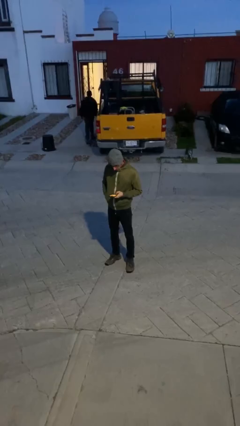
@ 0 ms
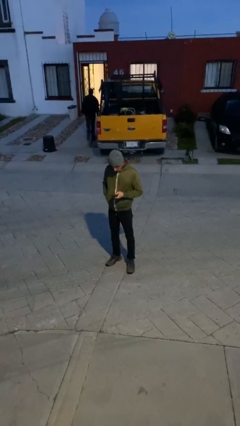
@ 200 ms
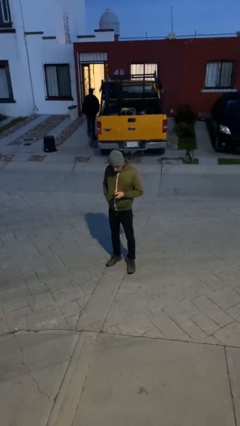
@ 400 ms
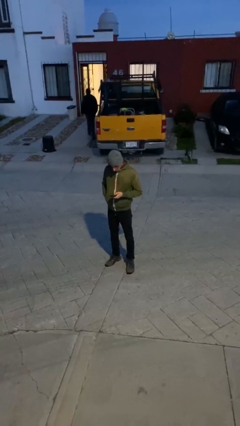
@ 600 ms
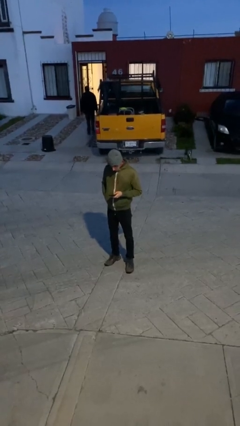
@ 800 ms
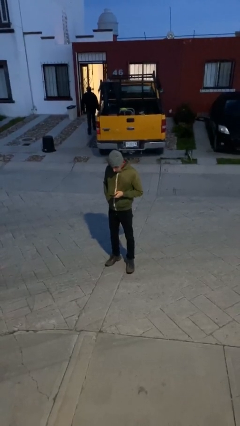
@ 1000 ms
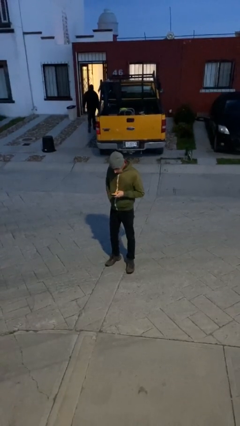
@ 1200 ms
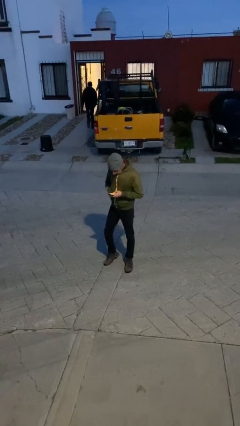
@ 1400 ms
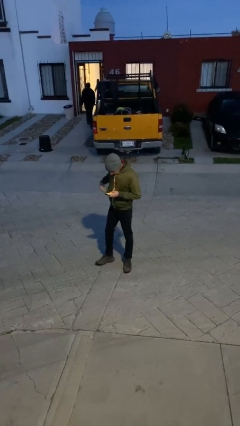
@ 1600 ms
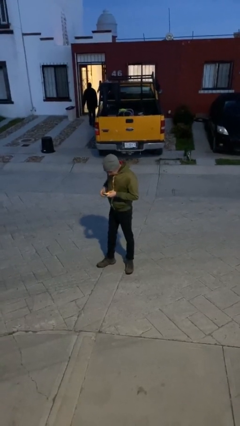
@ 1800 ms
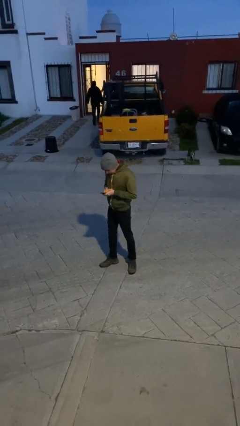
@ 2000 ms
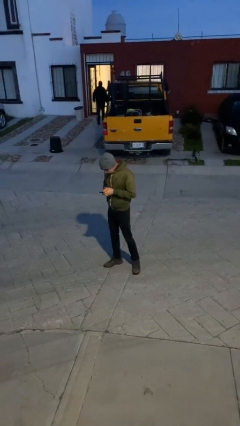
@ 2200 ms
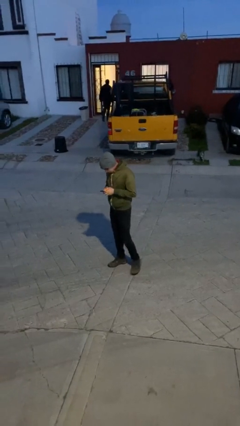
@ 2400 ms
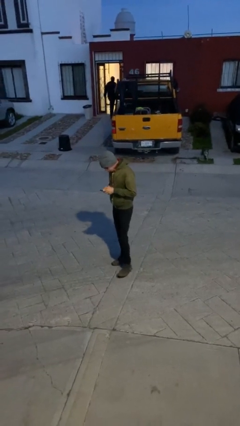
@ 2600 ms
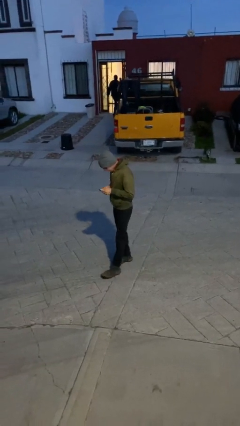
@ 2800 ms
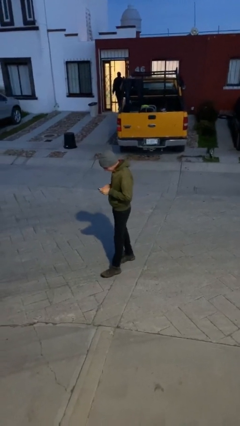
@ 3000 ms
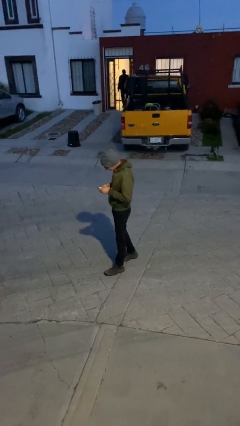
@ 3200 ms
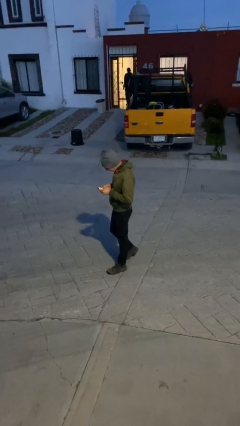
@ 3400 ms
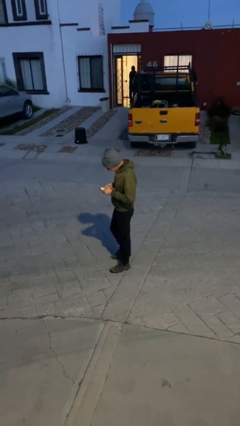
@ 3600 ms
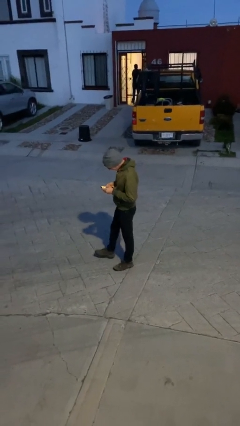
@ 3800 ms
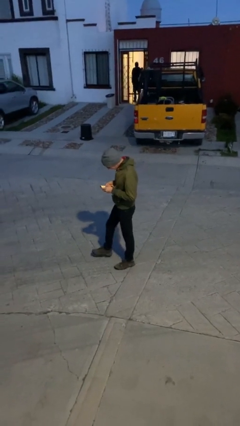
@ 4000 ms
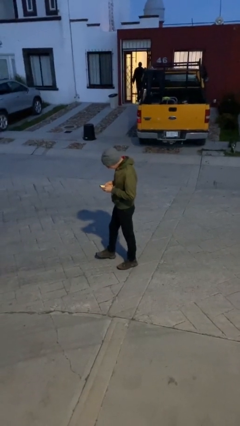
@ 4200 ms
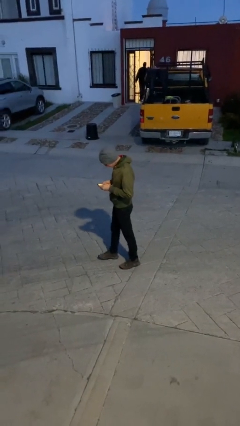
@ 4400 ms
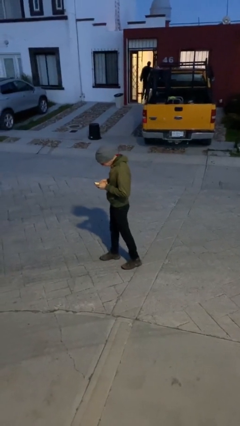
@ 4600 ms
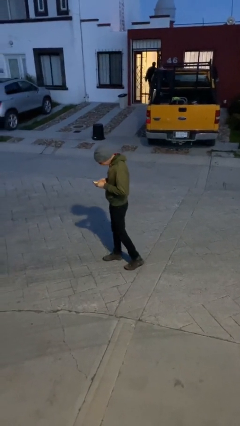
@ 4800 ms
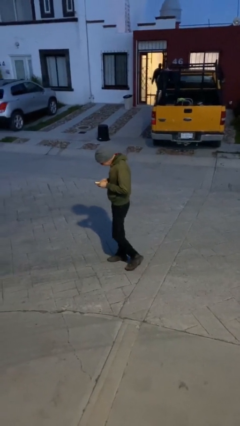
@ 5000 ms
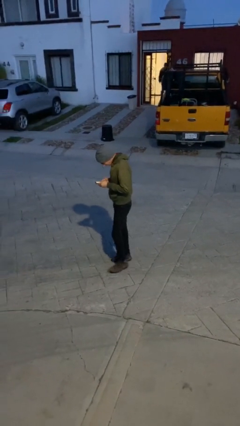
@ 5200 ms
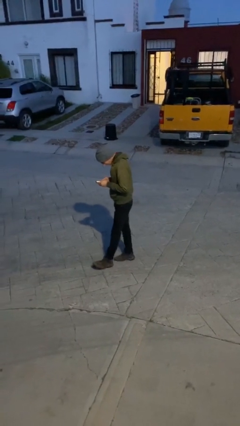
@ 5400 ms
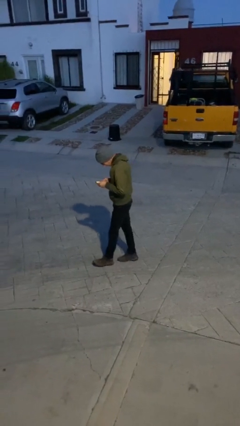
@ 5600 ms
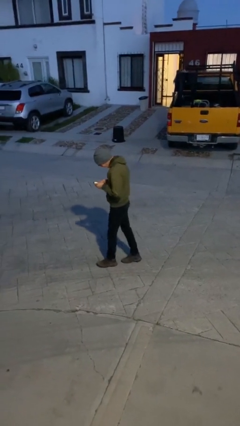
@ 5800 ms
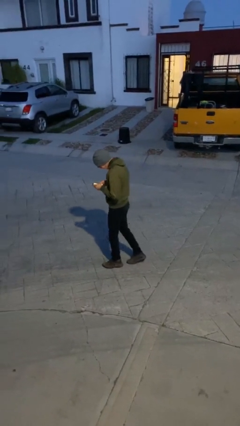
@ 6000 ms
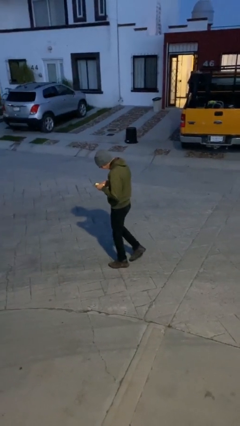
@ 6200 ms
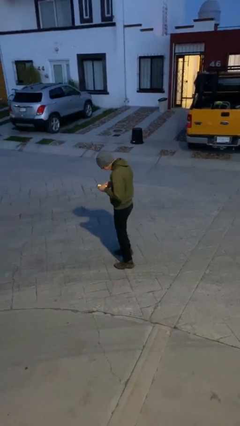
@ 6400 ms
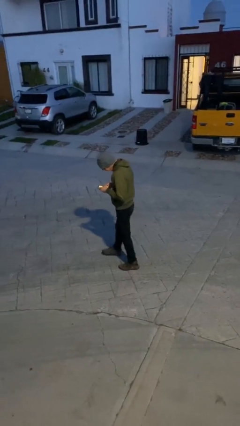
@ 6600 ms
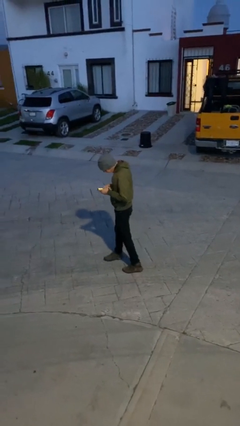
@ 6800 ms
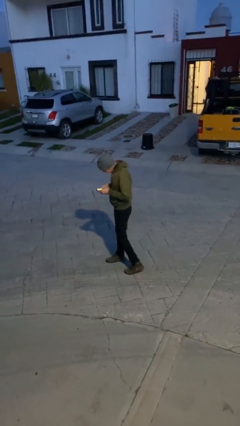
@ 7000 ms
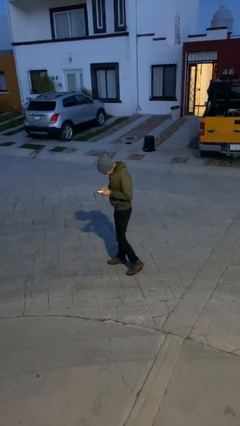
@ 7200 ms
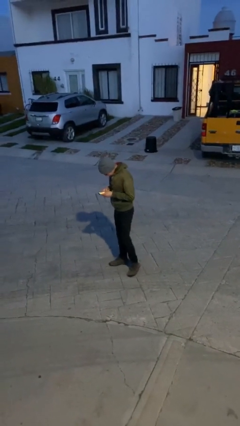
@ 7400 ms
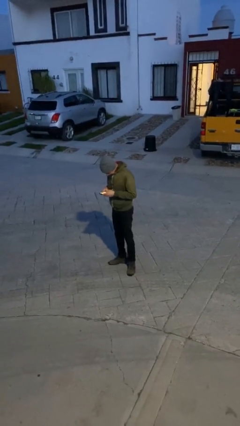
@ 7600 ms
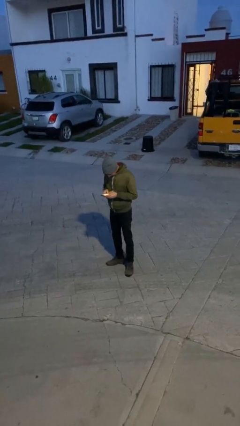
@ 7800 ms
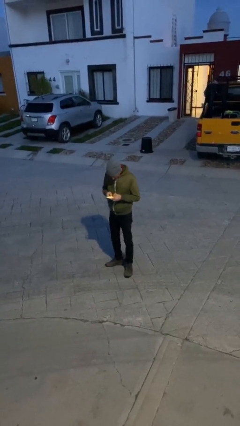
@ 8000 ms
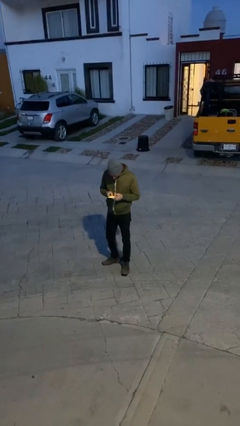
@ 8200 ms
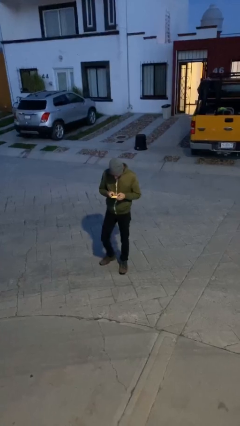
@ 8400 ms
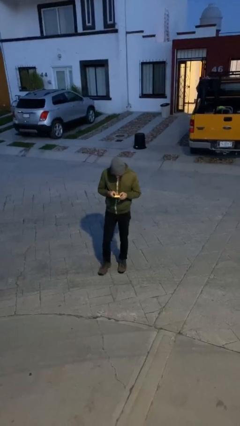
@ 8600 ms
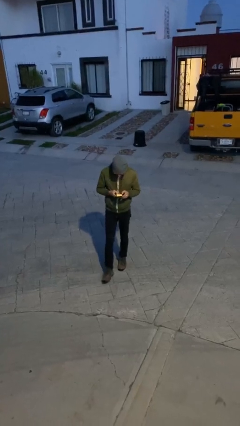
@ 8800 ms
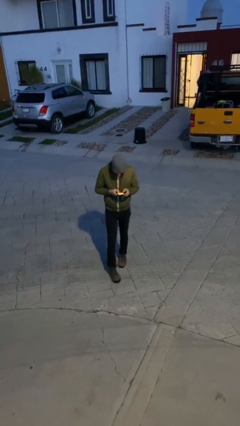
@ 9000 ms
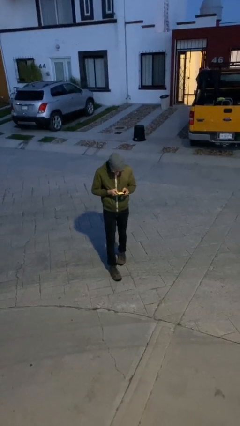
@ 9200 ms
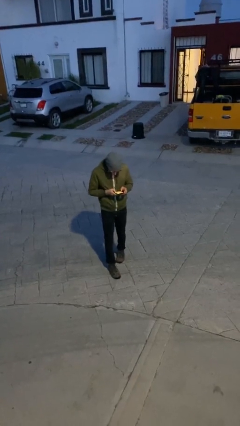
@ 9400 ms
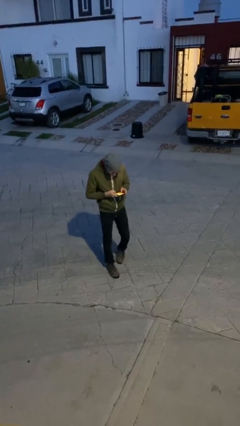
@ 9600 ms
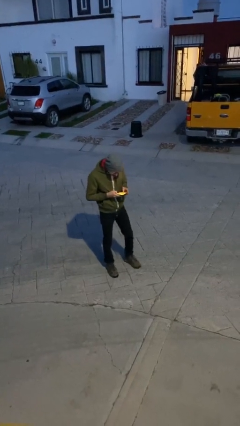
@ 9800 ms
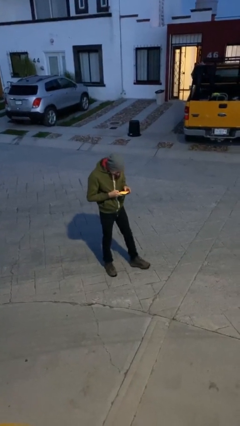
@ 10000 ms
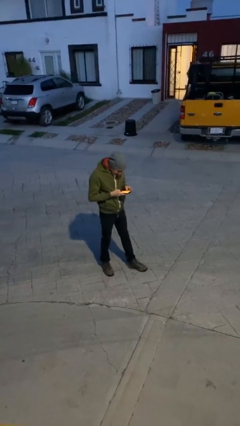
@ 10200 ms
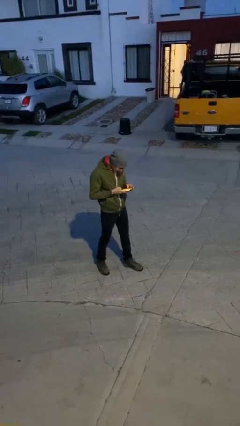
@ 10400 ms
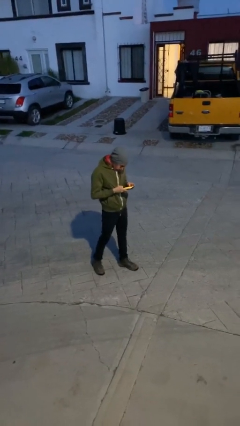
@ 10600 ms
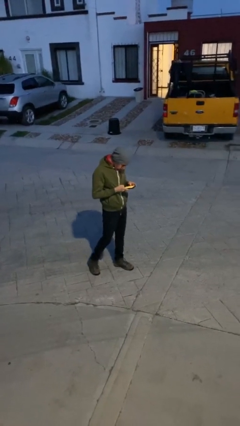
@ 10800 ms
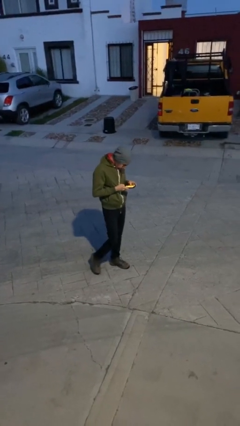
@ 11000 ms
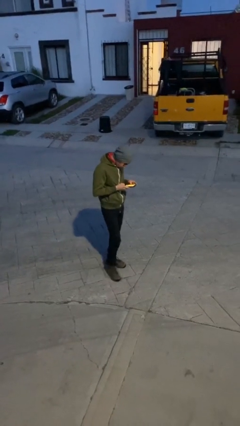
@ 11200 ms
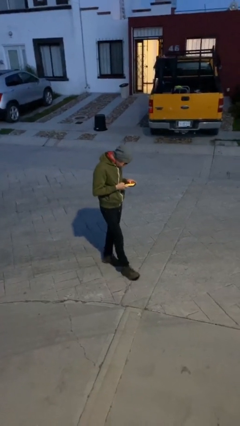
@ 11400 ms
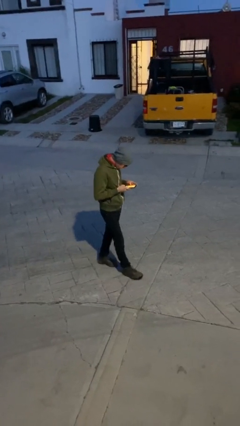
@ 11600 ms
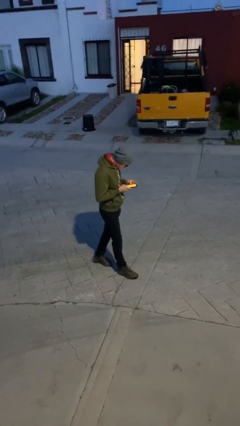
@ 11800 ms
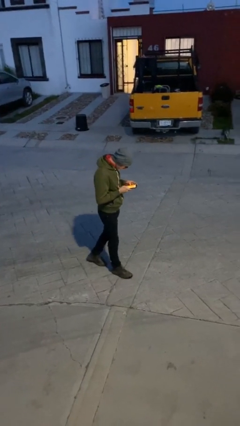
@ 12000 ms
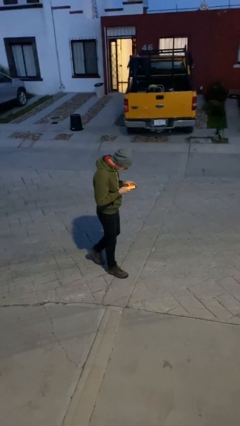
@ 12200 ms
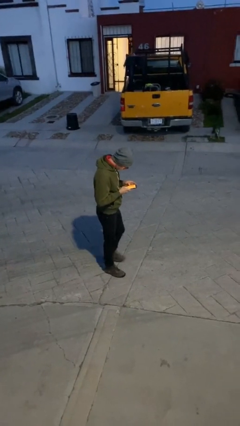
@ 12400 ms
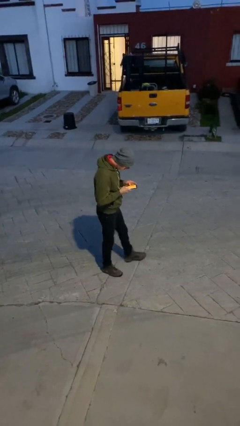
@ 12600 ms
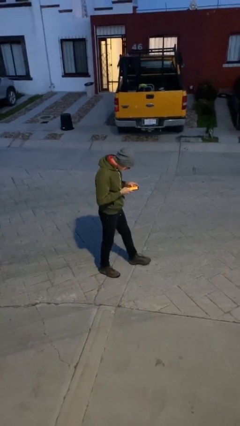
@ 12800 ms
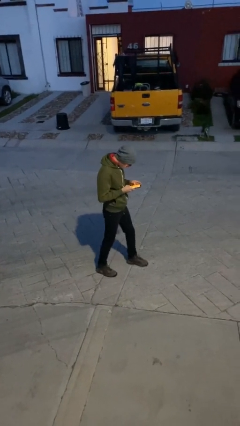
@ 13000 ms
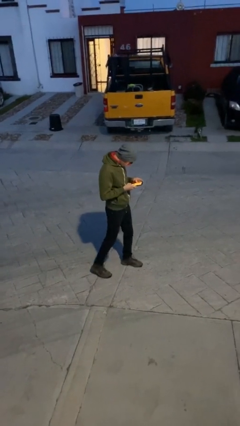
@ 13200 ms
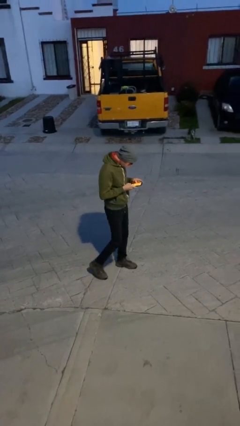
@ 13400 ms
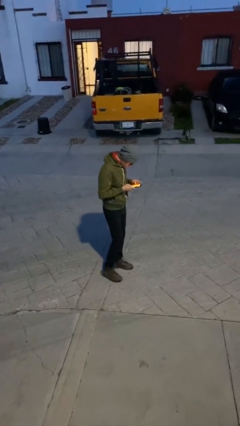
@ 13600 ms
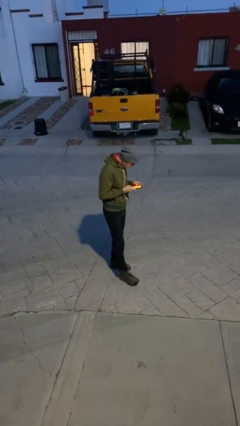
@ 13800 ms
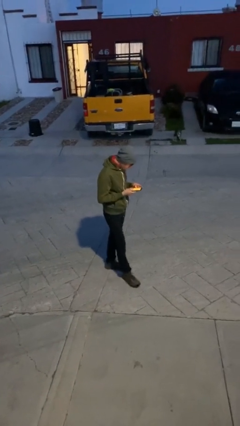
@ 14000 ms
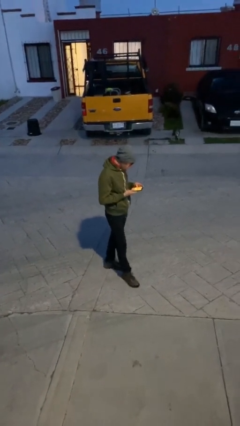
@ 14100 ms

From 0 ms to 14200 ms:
person texts on phone

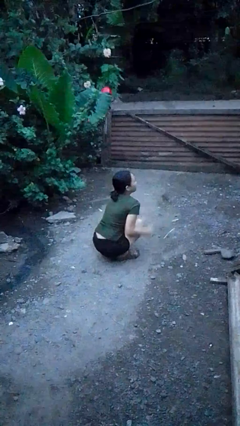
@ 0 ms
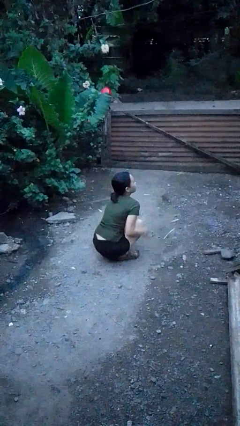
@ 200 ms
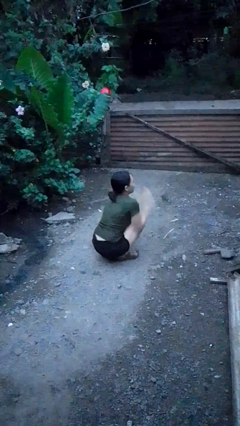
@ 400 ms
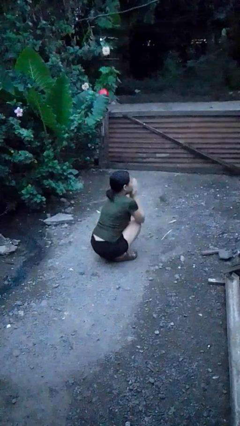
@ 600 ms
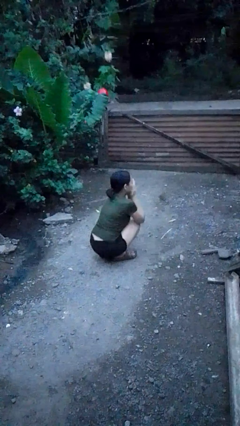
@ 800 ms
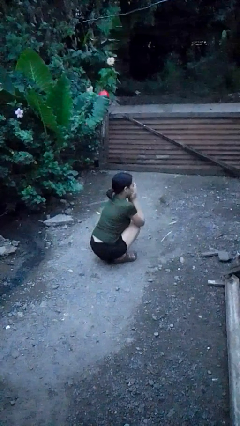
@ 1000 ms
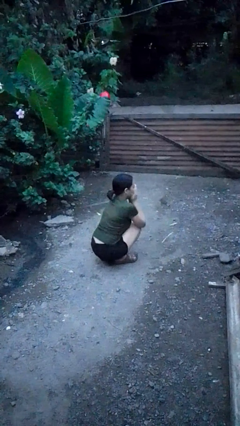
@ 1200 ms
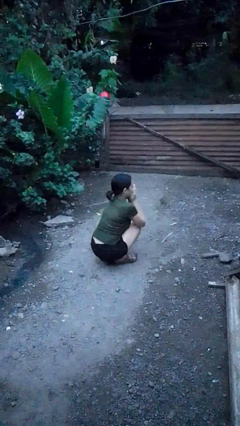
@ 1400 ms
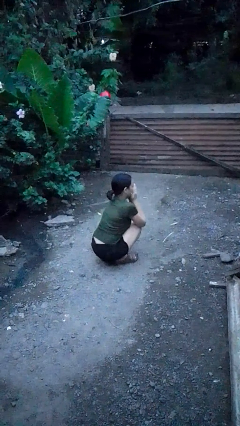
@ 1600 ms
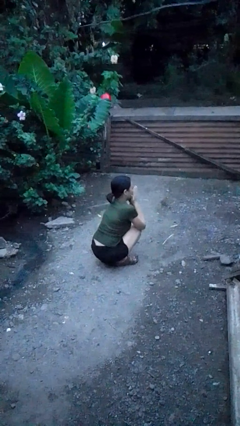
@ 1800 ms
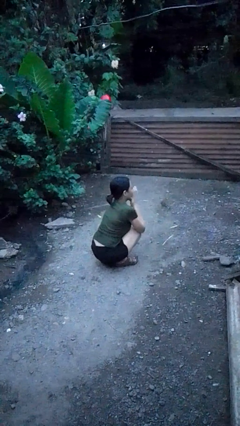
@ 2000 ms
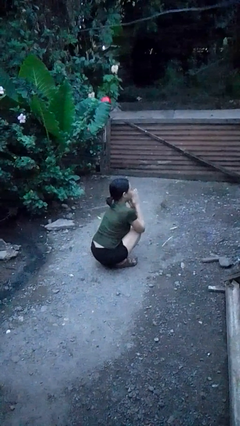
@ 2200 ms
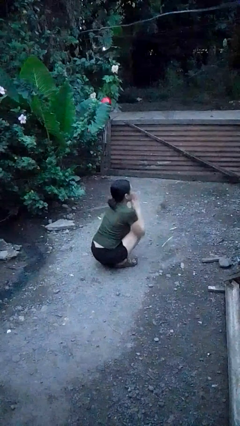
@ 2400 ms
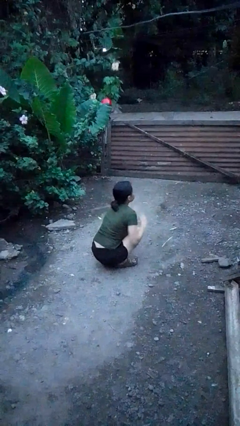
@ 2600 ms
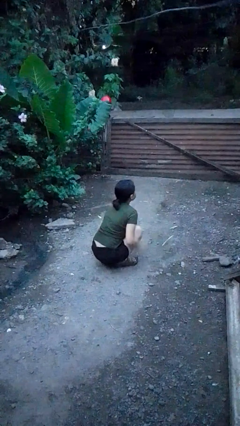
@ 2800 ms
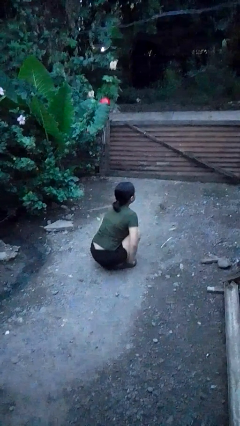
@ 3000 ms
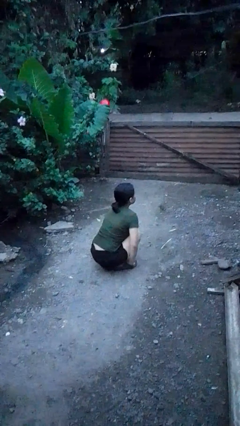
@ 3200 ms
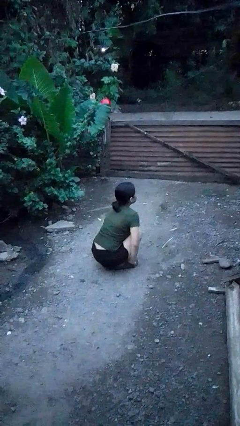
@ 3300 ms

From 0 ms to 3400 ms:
person blows into hands

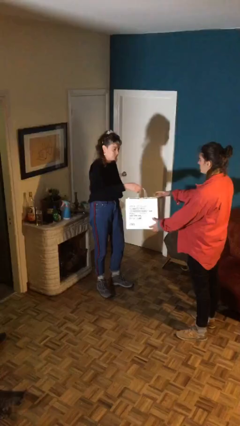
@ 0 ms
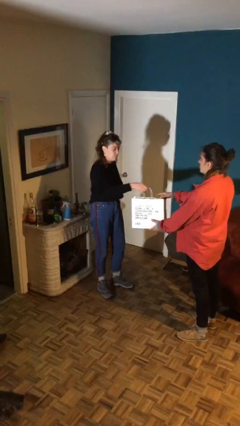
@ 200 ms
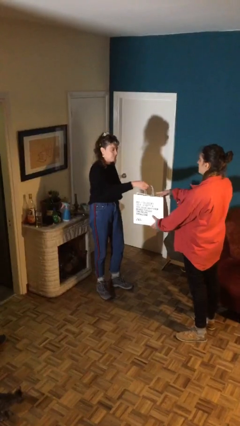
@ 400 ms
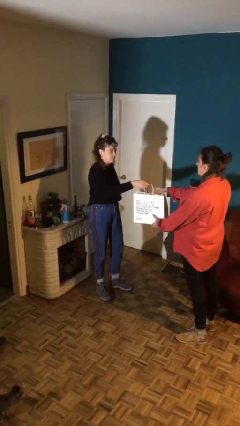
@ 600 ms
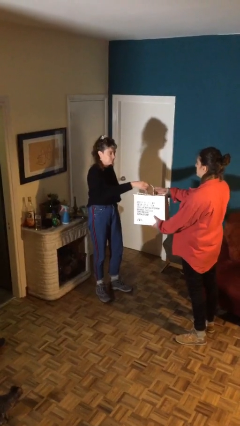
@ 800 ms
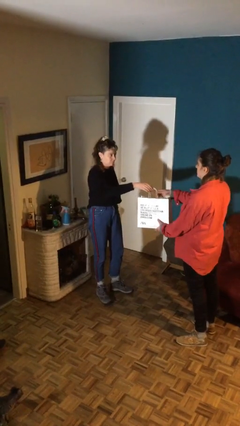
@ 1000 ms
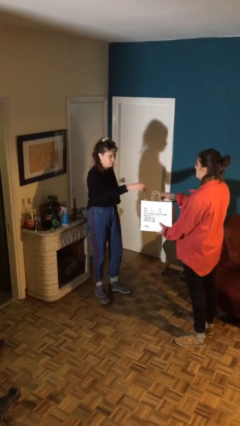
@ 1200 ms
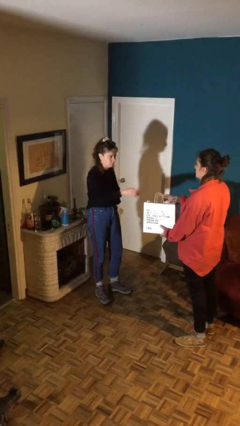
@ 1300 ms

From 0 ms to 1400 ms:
person transfers object to person
